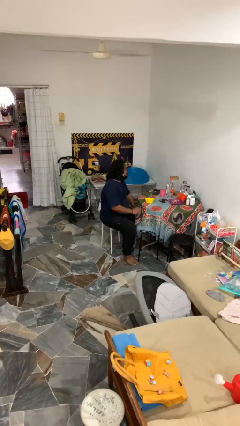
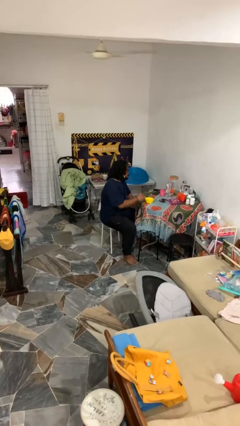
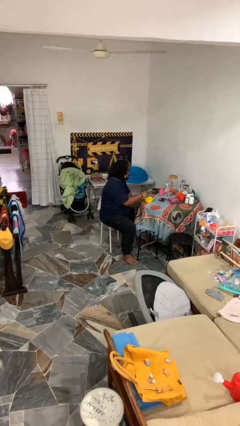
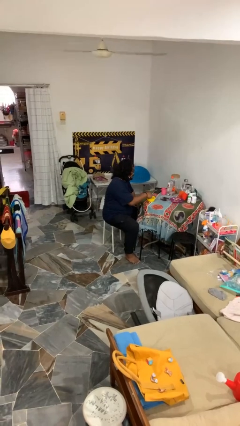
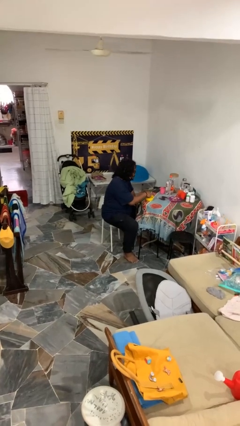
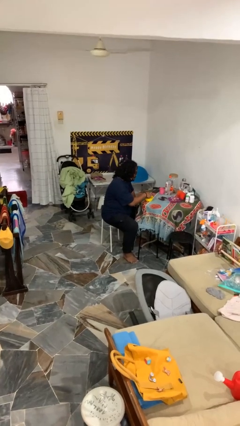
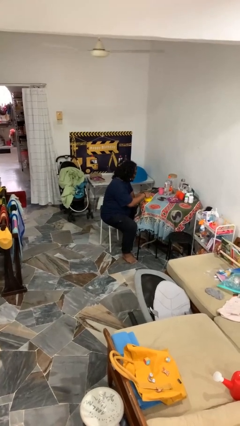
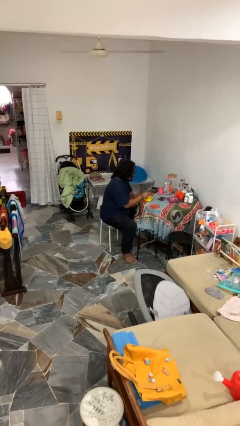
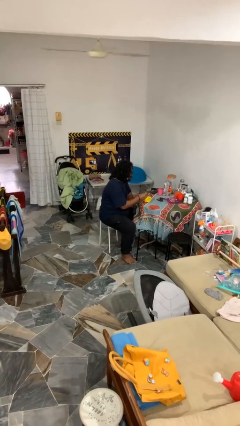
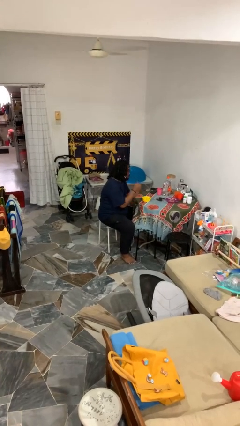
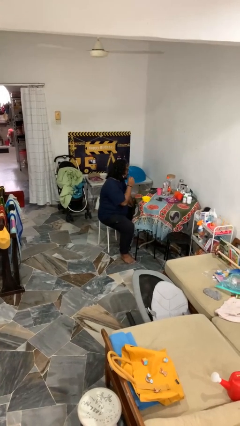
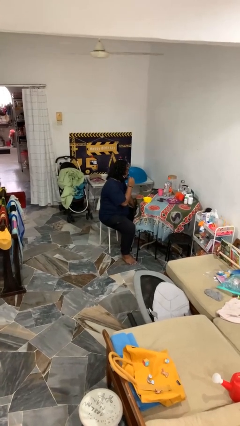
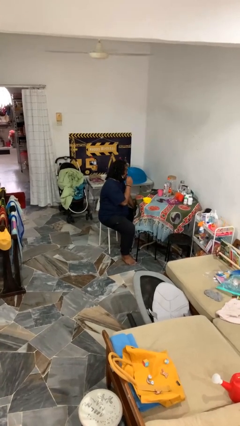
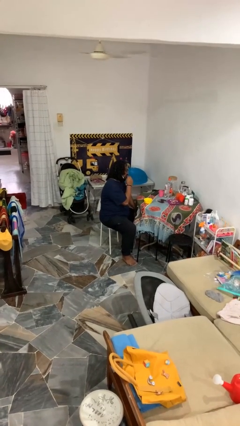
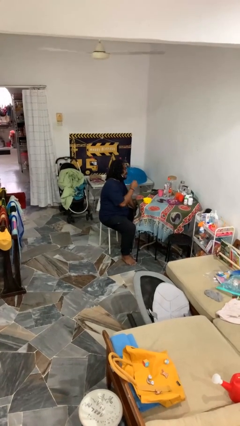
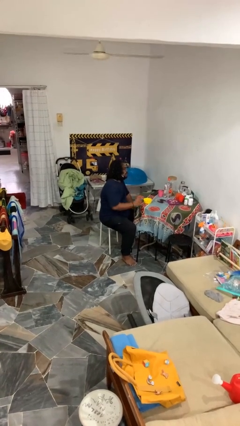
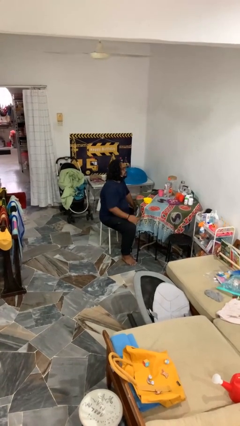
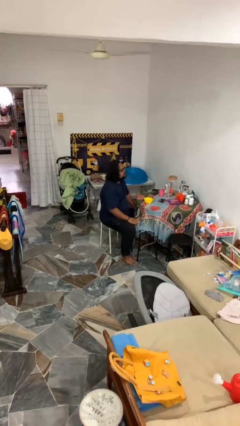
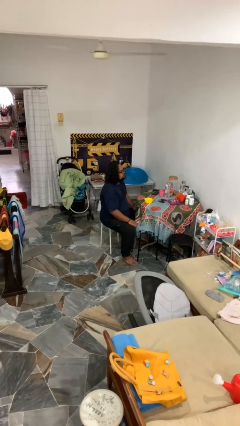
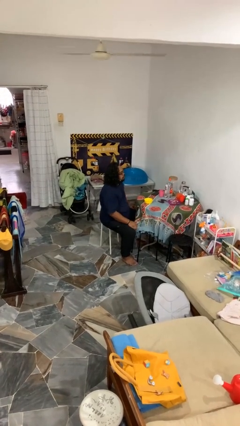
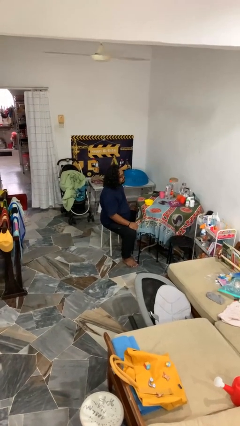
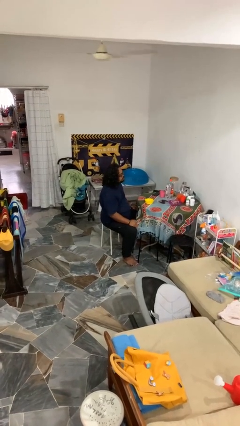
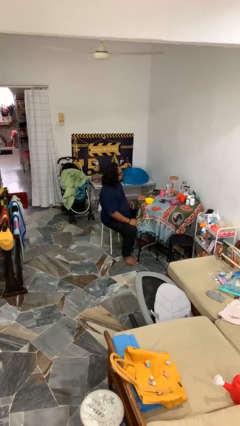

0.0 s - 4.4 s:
person eats with hands

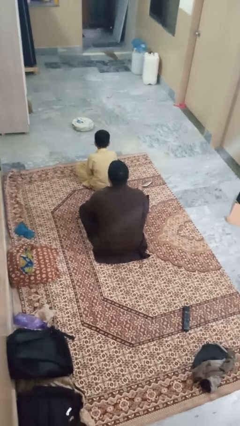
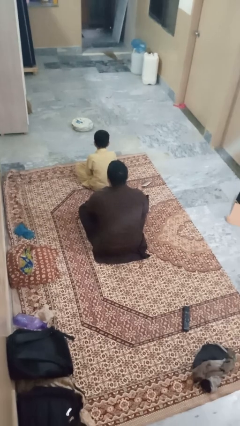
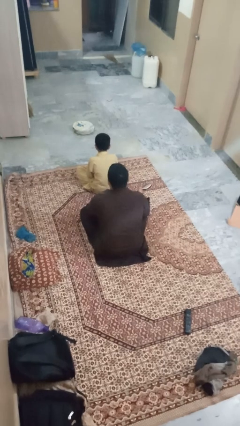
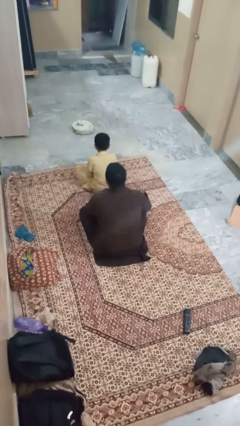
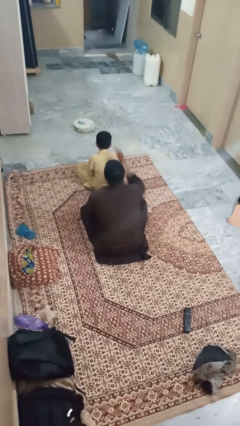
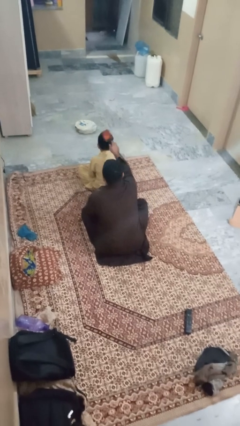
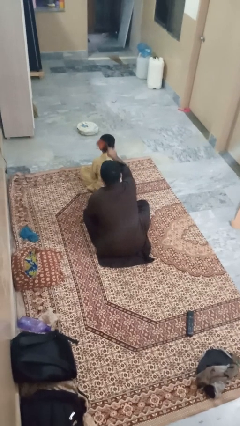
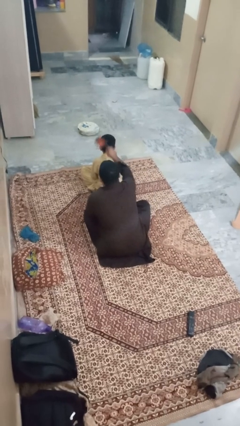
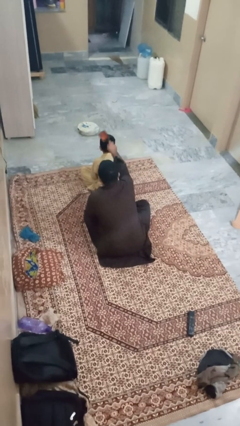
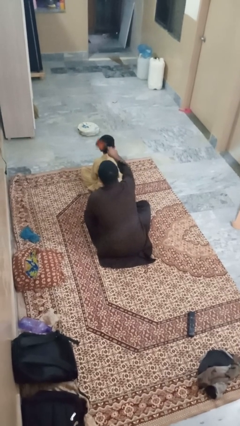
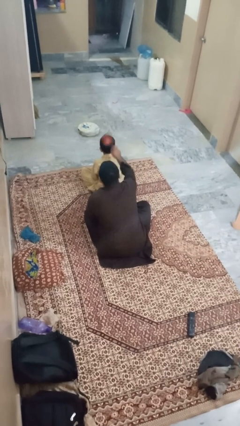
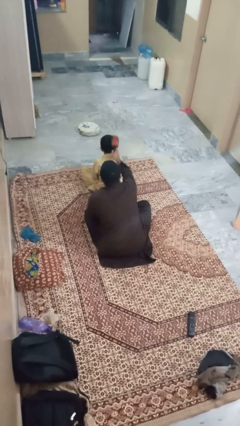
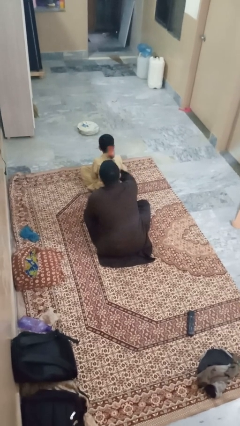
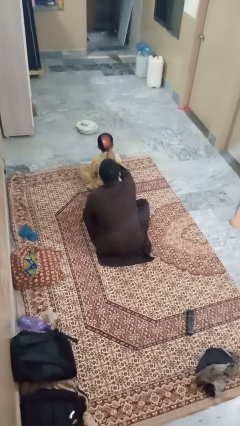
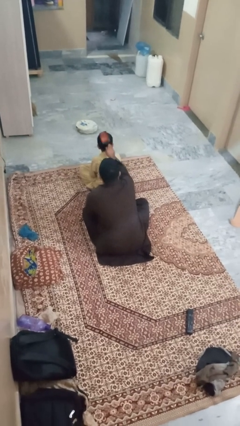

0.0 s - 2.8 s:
person brushes hair of person

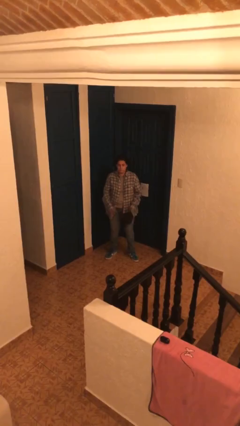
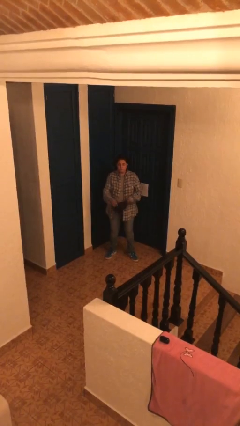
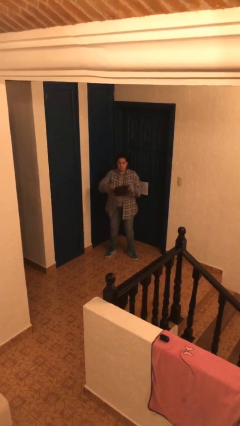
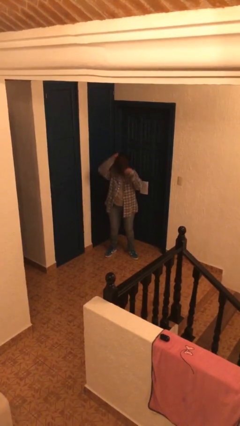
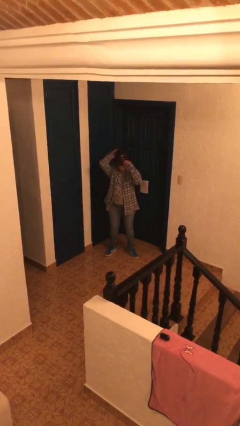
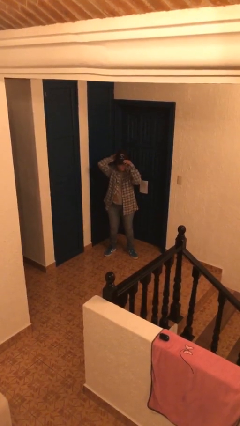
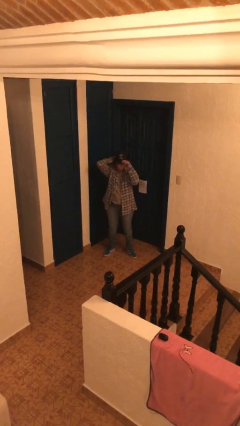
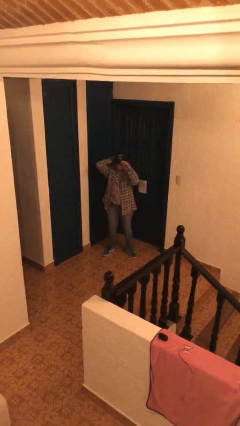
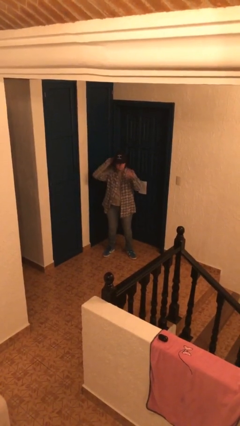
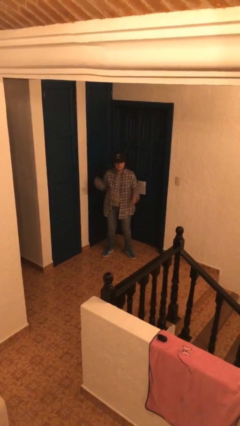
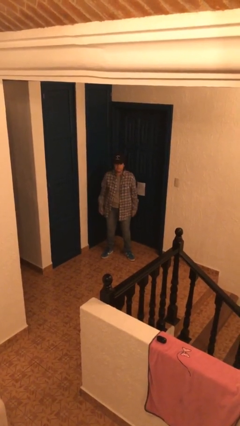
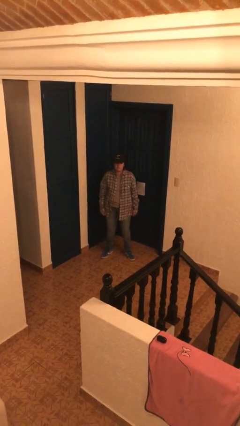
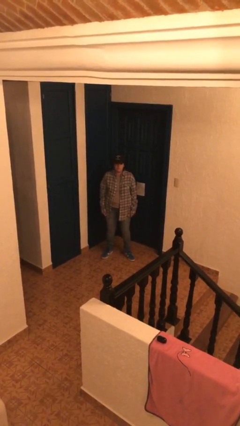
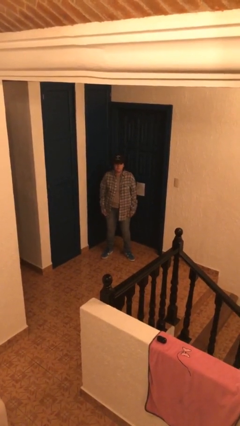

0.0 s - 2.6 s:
person puts on hat

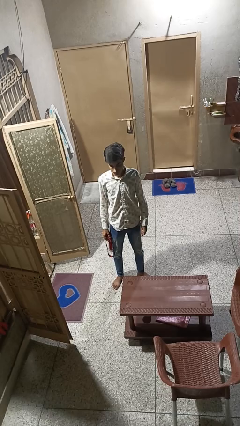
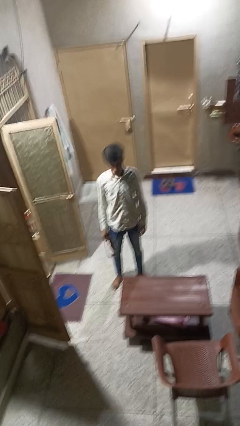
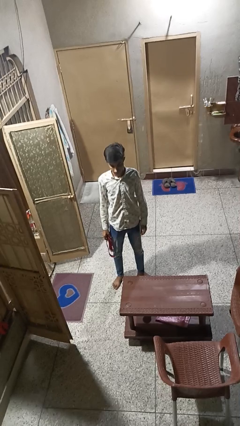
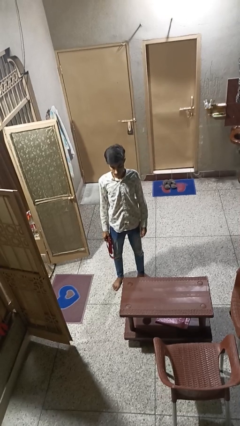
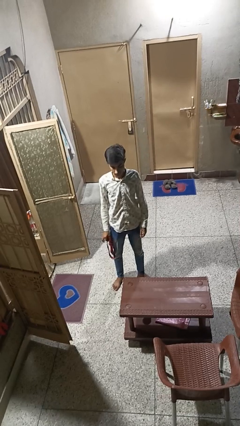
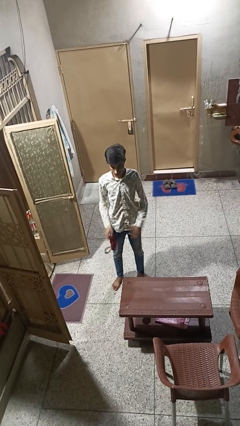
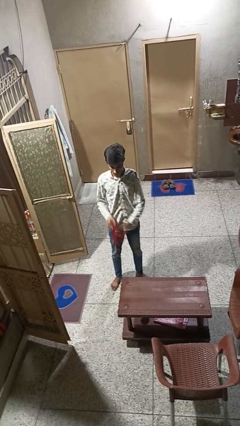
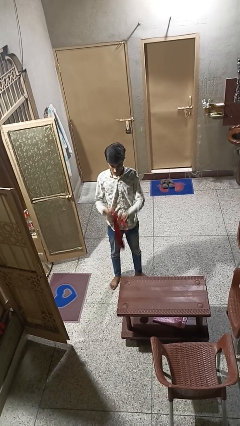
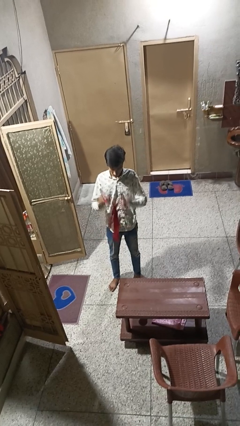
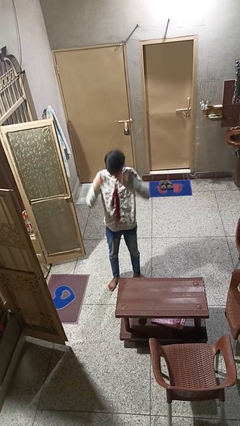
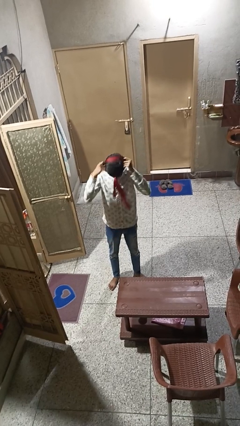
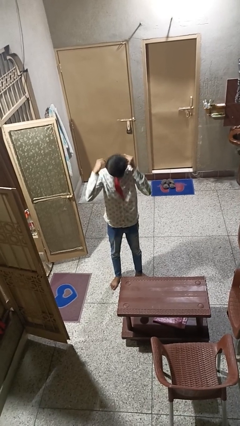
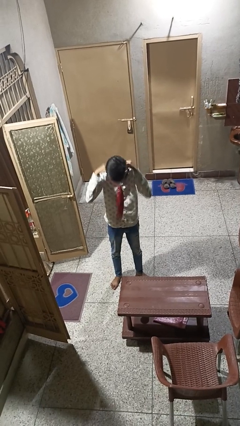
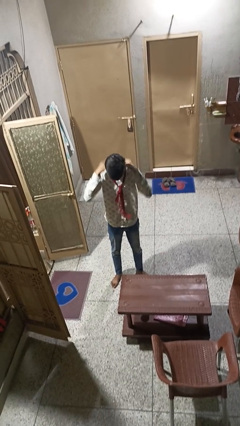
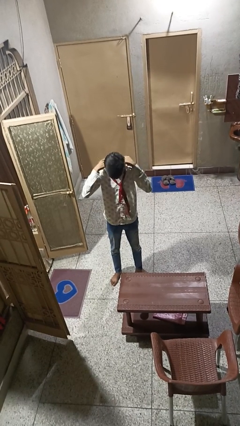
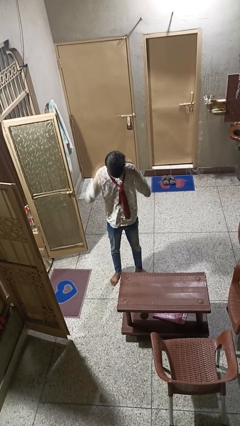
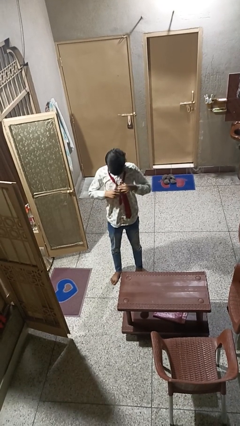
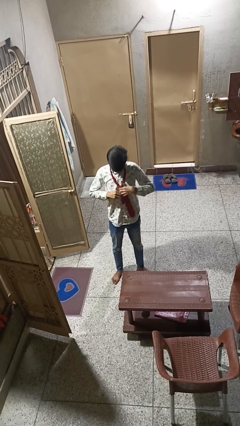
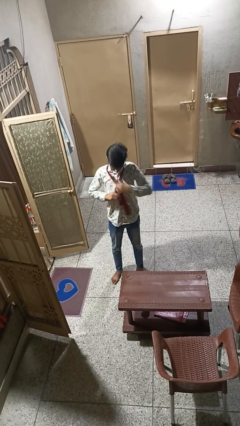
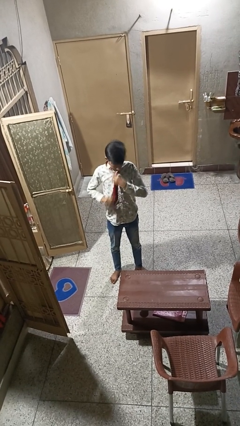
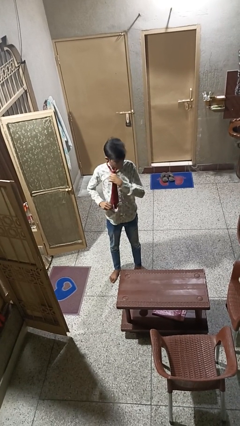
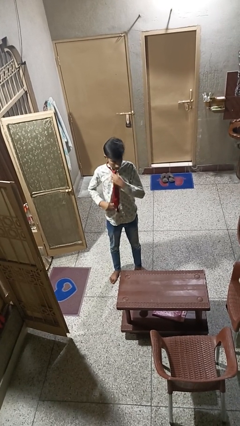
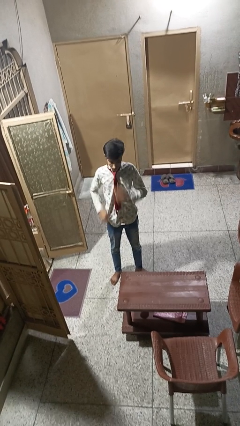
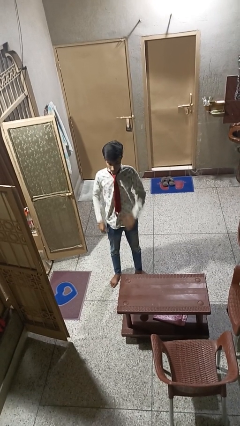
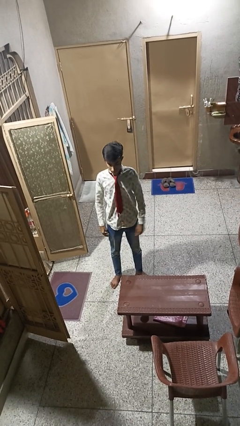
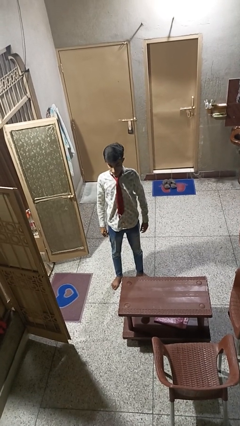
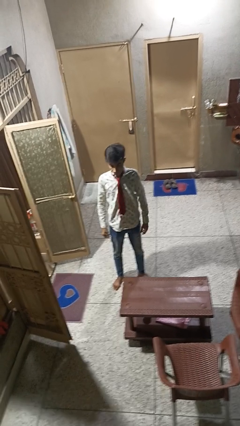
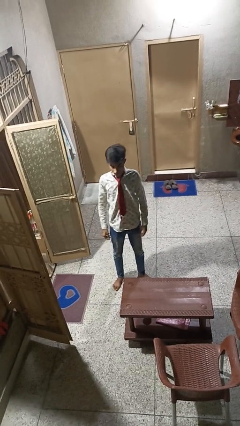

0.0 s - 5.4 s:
person puts on necktie

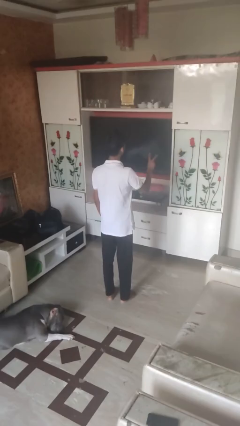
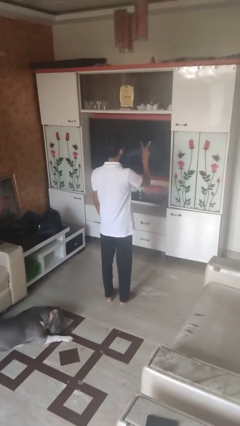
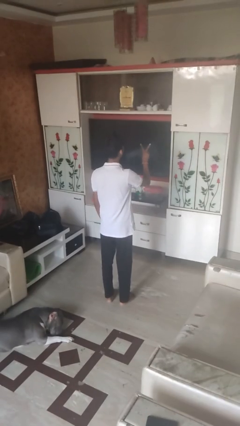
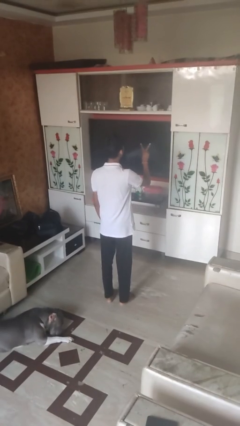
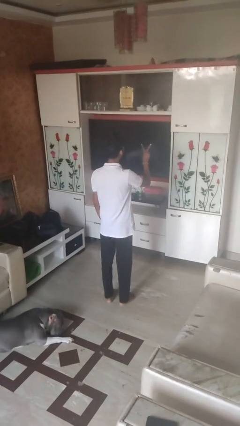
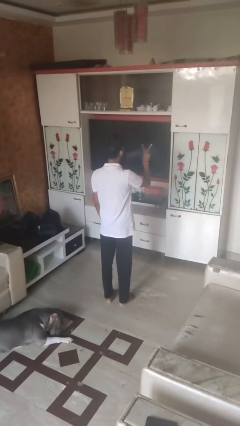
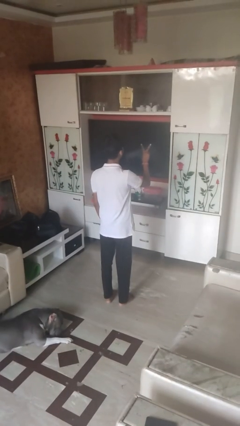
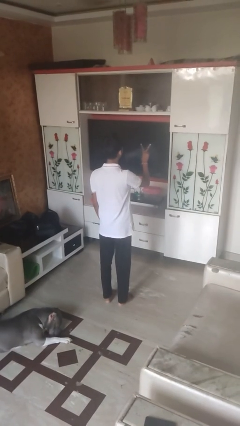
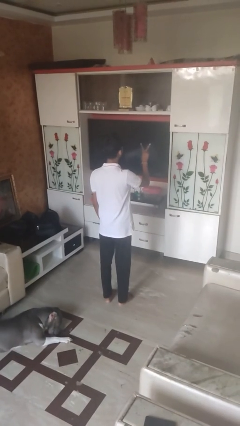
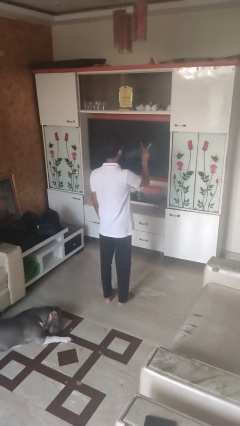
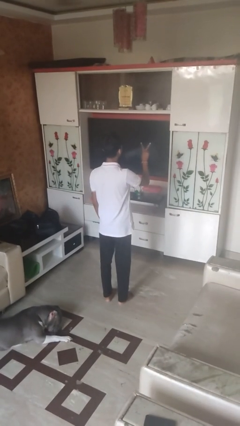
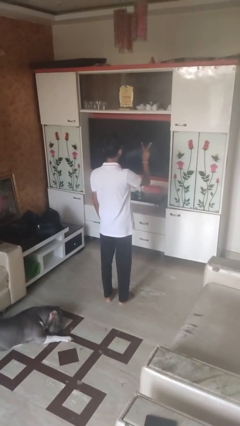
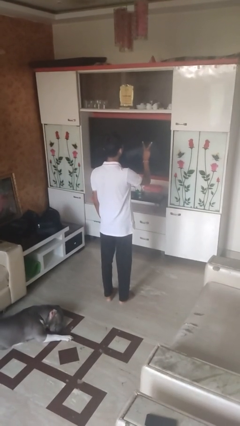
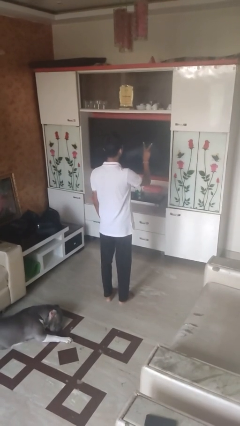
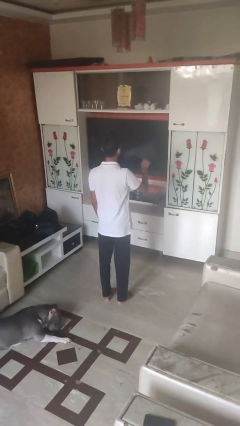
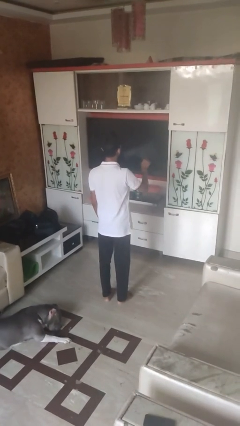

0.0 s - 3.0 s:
person gestures peace
